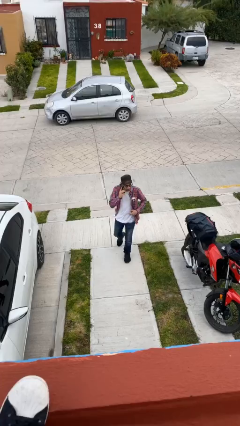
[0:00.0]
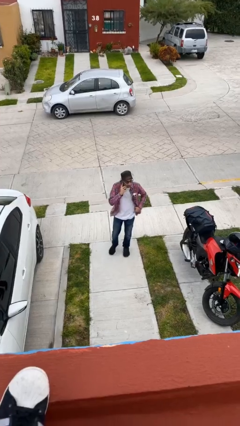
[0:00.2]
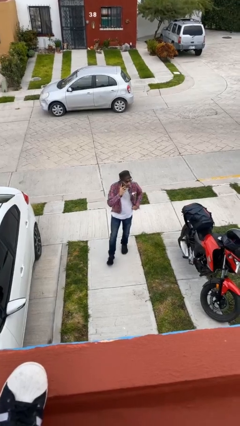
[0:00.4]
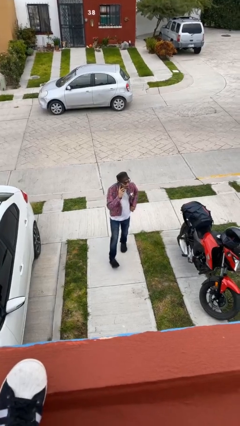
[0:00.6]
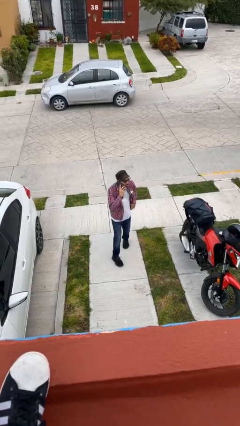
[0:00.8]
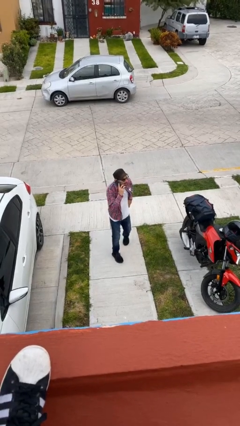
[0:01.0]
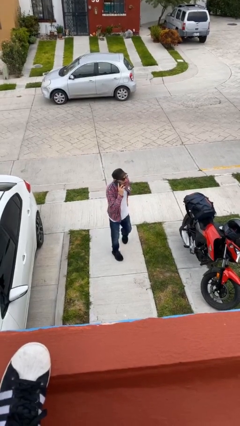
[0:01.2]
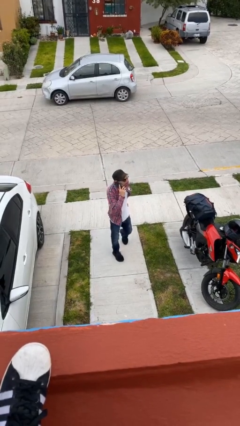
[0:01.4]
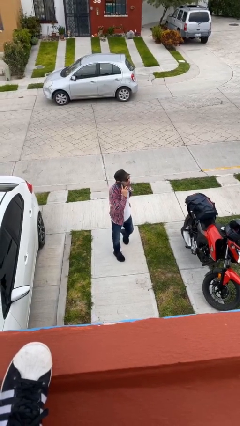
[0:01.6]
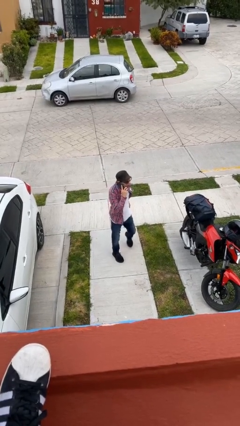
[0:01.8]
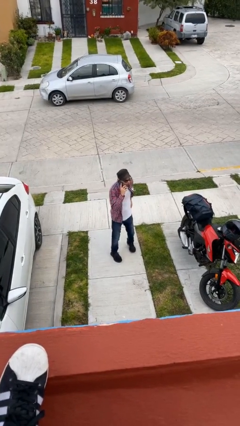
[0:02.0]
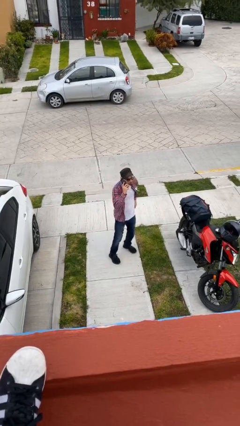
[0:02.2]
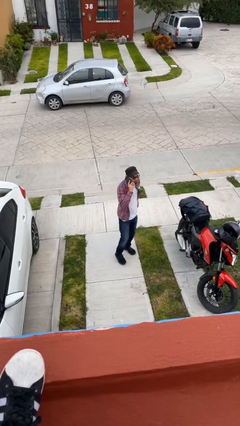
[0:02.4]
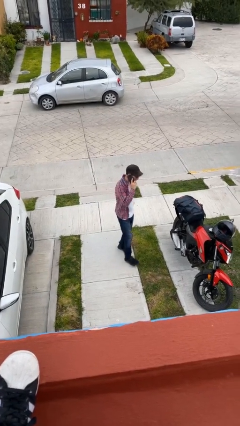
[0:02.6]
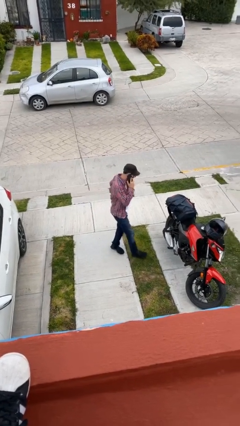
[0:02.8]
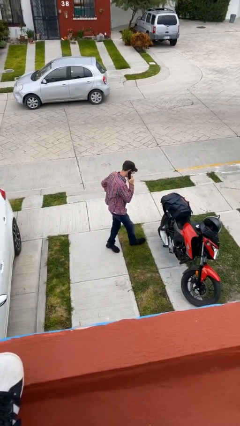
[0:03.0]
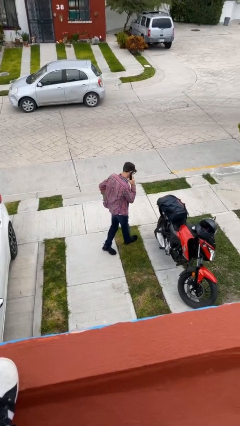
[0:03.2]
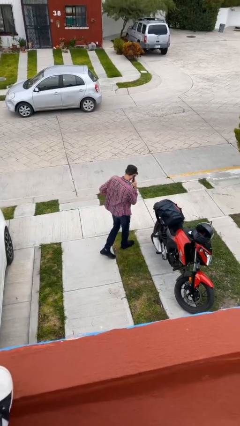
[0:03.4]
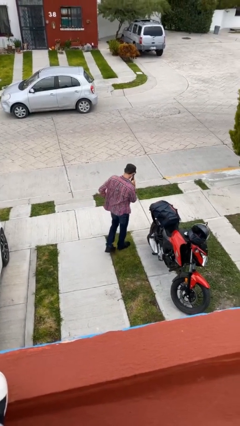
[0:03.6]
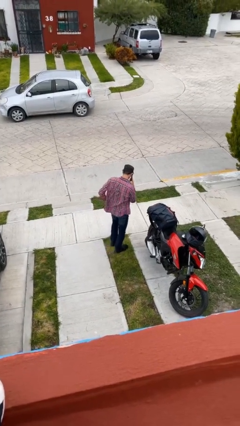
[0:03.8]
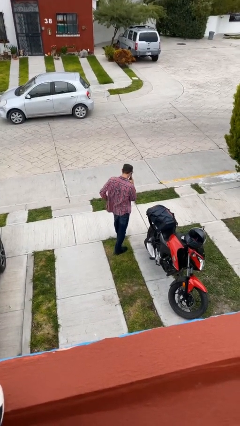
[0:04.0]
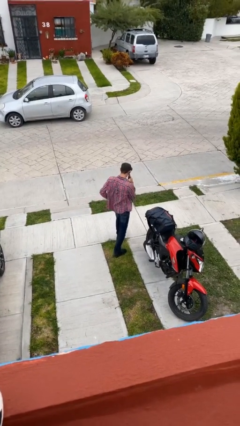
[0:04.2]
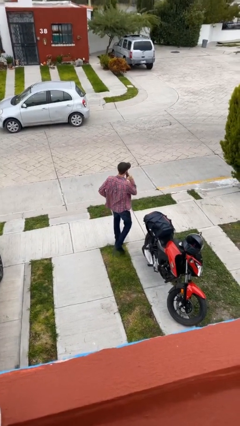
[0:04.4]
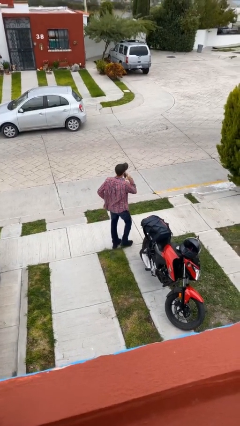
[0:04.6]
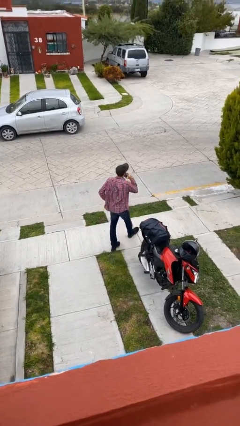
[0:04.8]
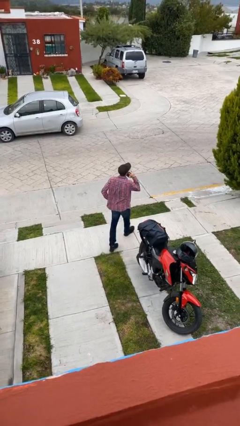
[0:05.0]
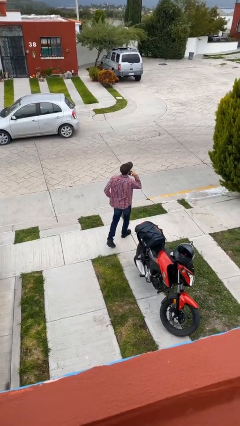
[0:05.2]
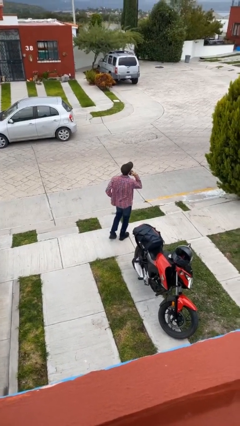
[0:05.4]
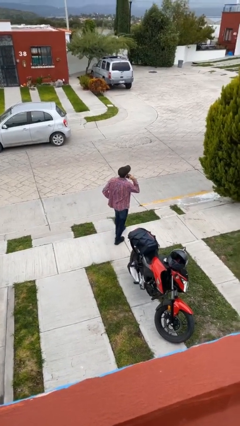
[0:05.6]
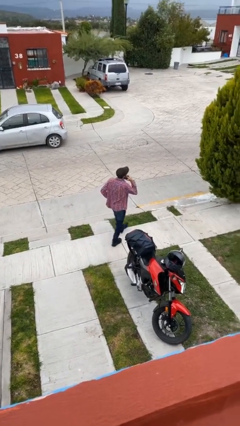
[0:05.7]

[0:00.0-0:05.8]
person talks on phone

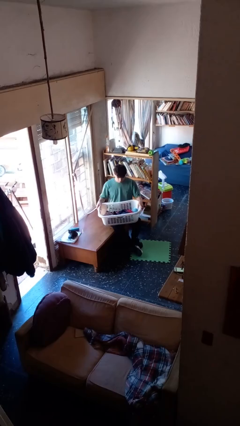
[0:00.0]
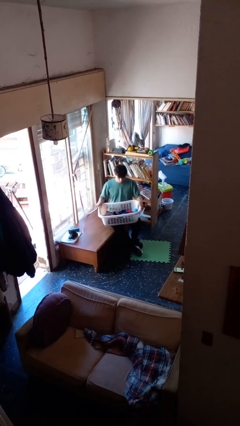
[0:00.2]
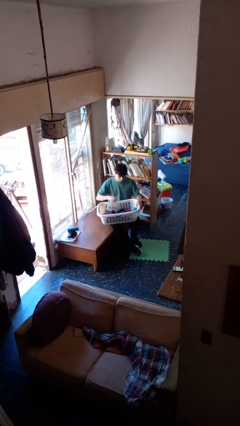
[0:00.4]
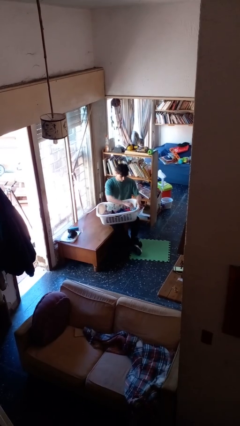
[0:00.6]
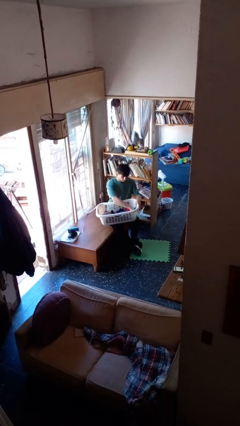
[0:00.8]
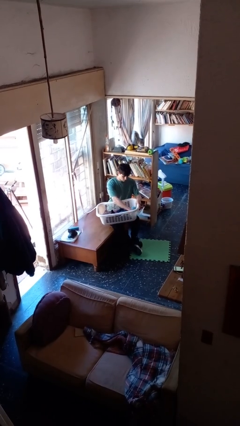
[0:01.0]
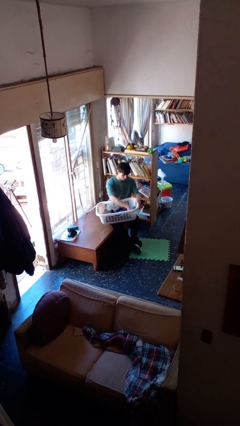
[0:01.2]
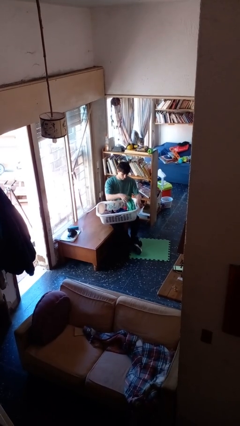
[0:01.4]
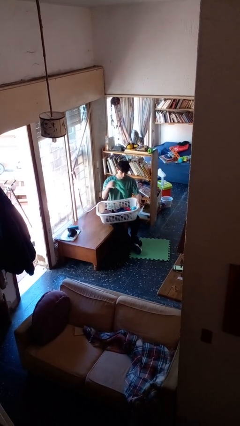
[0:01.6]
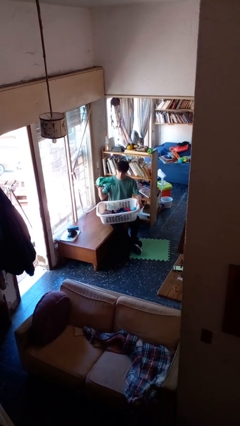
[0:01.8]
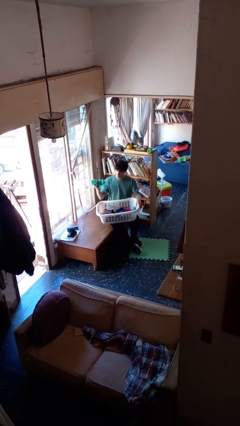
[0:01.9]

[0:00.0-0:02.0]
person takes object from basket

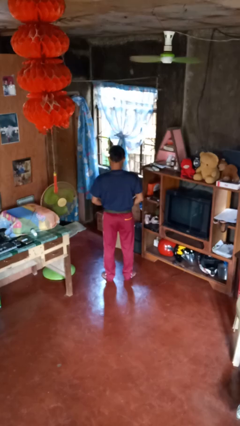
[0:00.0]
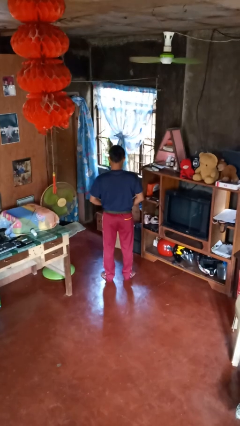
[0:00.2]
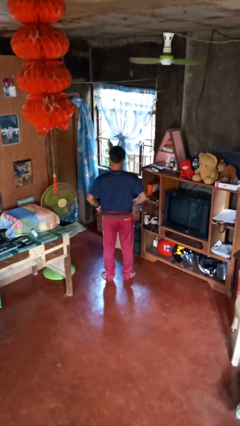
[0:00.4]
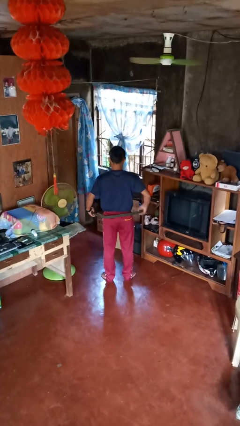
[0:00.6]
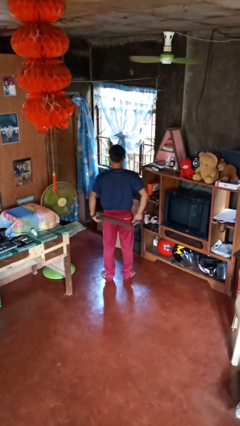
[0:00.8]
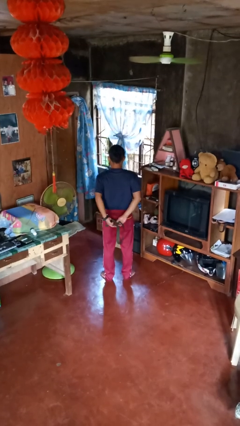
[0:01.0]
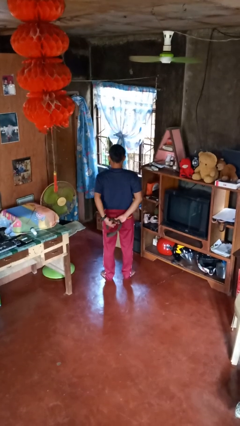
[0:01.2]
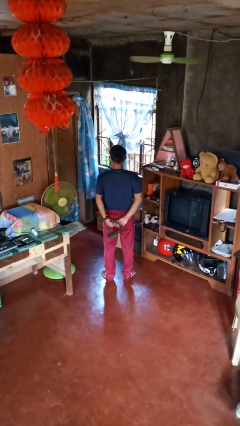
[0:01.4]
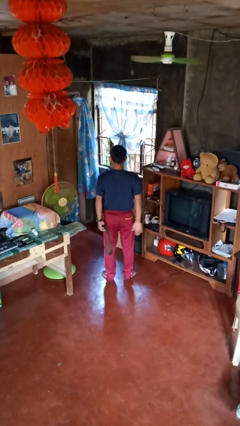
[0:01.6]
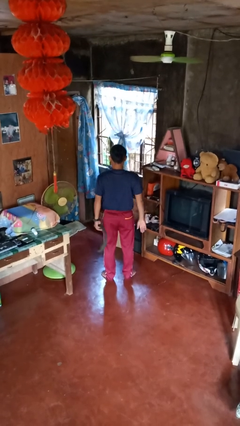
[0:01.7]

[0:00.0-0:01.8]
person takes off belt

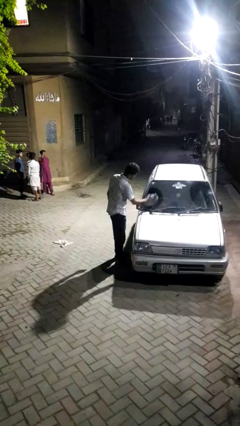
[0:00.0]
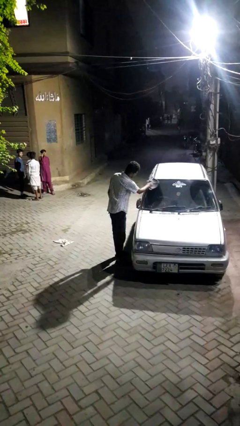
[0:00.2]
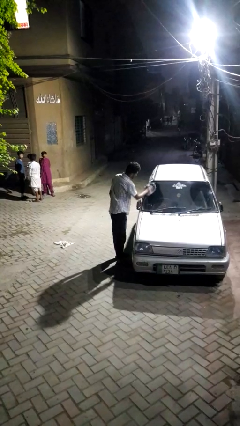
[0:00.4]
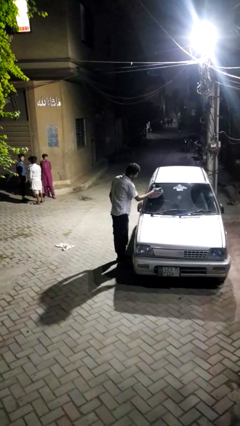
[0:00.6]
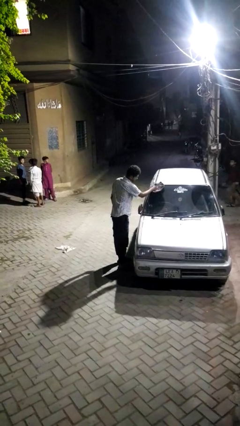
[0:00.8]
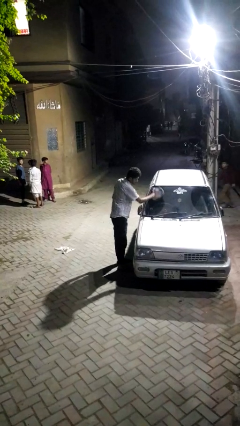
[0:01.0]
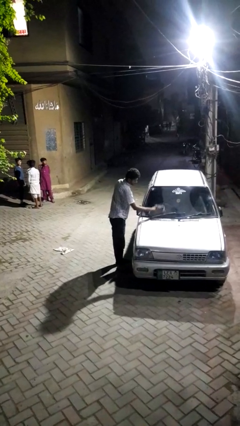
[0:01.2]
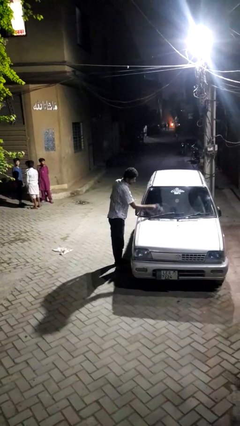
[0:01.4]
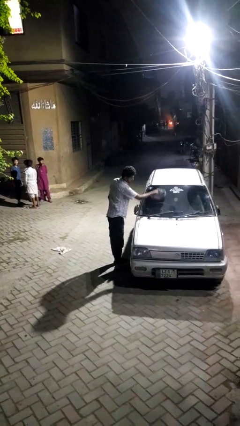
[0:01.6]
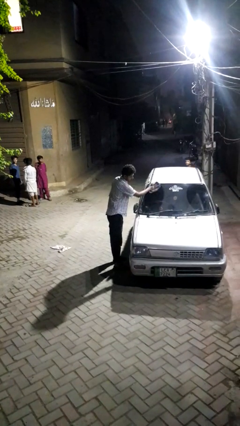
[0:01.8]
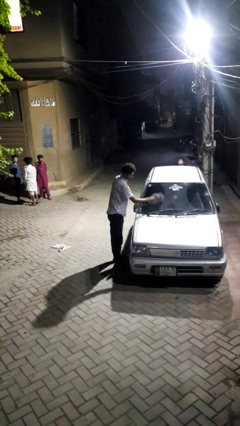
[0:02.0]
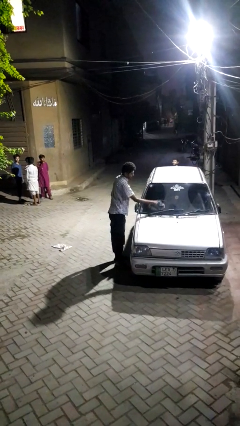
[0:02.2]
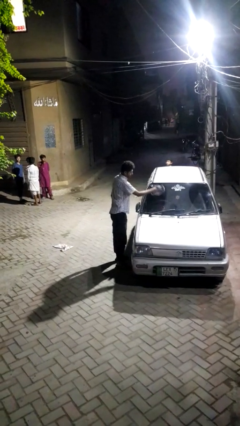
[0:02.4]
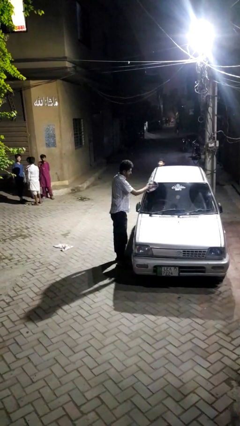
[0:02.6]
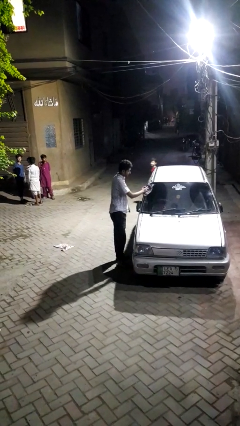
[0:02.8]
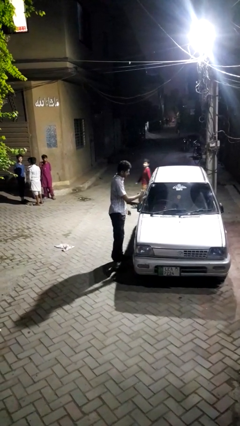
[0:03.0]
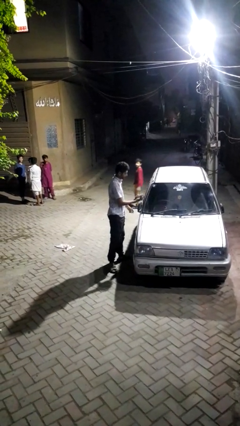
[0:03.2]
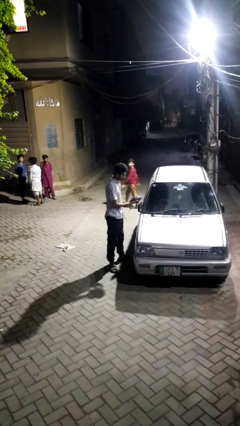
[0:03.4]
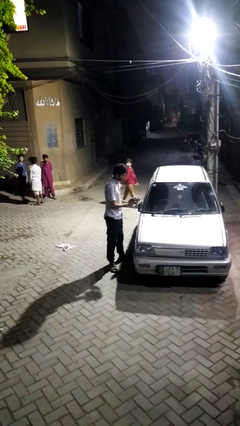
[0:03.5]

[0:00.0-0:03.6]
person polishes car with rag

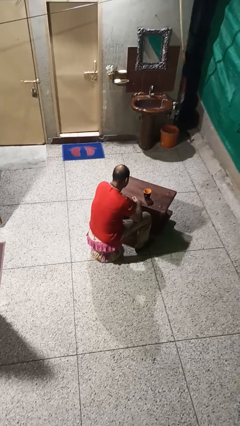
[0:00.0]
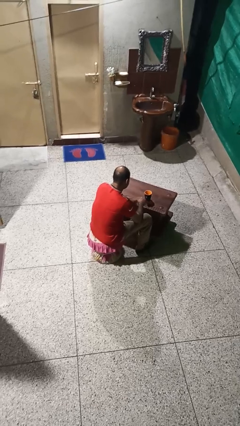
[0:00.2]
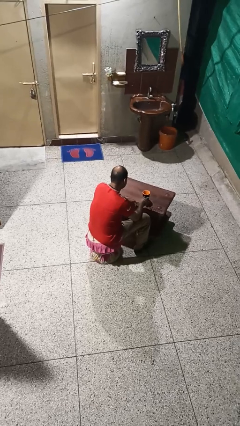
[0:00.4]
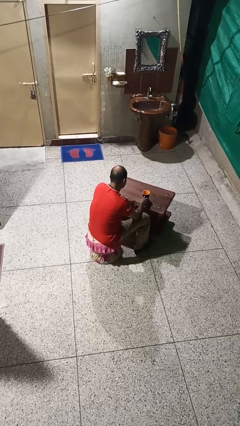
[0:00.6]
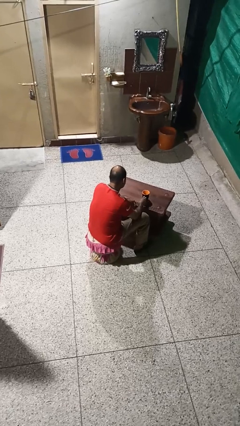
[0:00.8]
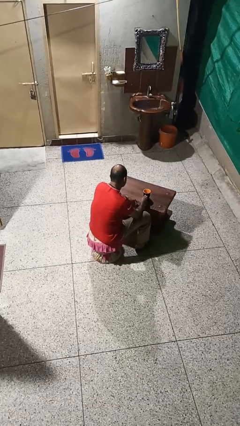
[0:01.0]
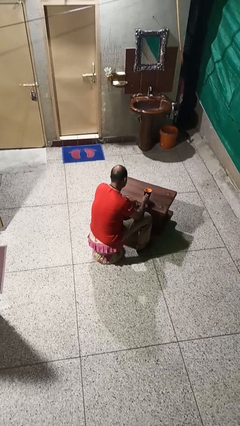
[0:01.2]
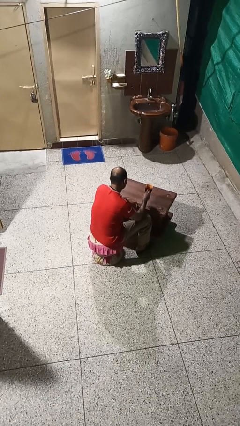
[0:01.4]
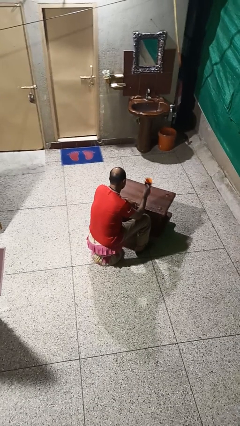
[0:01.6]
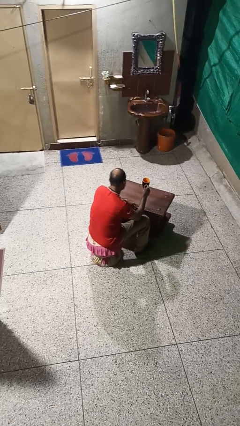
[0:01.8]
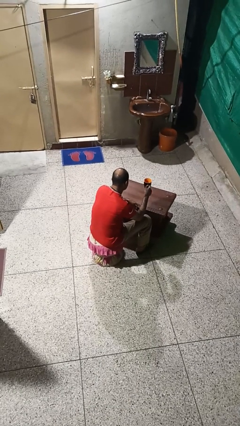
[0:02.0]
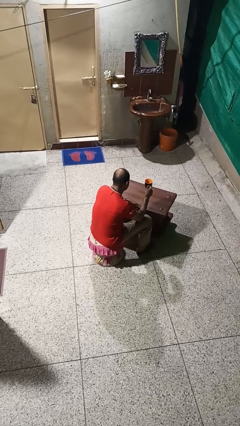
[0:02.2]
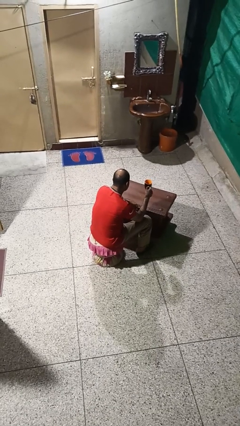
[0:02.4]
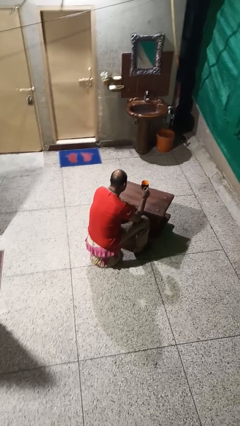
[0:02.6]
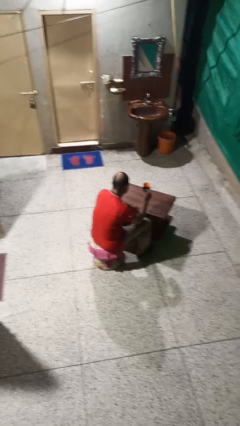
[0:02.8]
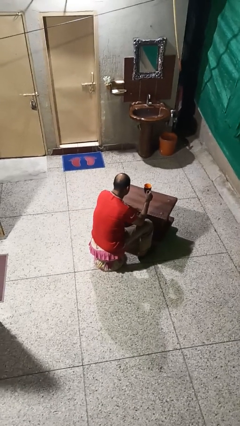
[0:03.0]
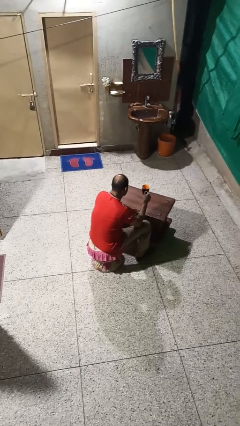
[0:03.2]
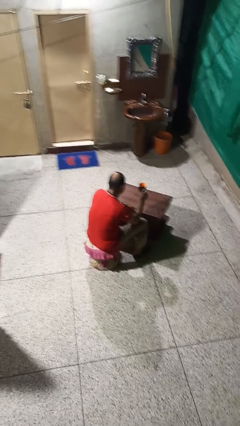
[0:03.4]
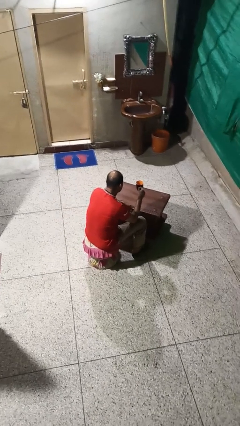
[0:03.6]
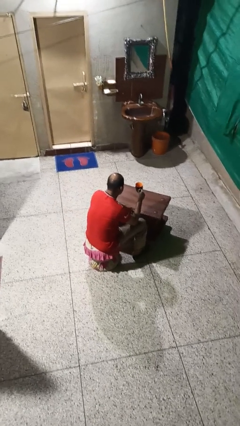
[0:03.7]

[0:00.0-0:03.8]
person picks up object from table

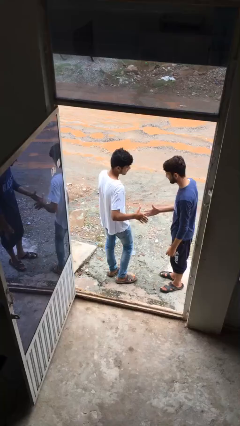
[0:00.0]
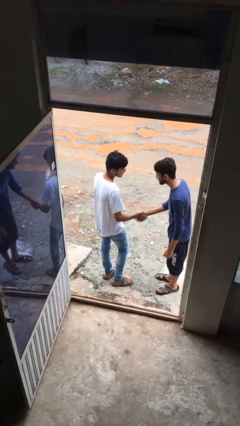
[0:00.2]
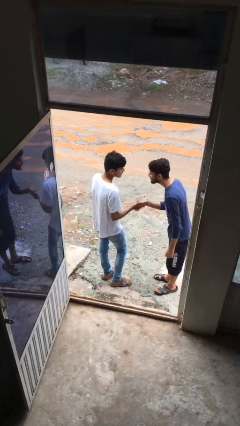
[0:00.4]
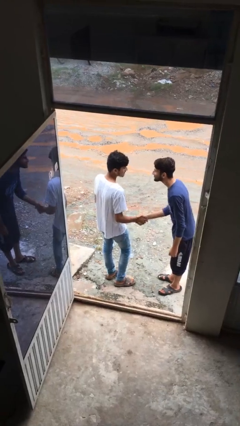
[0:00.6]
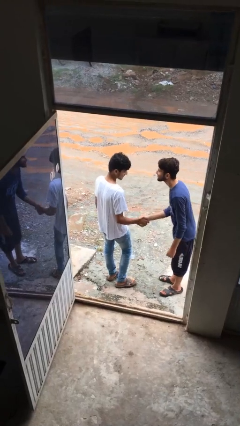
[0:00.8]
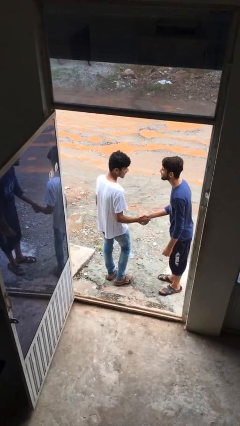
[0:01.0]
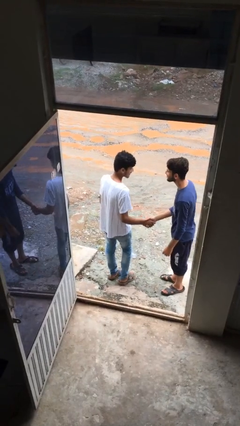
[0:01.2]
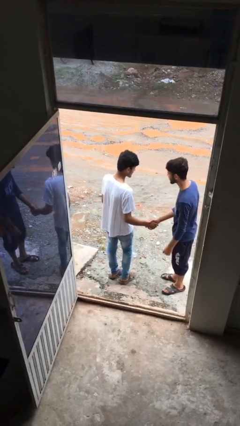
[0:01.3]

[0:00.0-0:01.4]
person shakes hand
